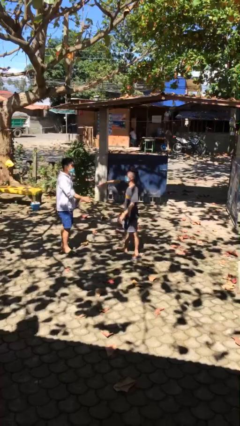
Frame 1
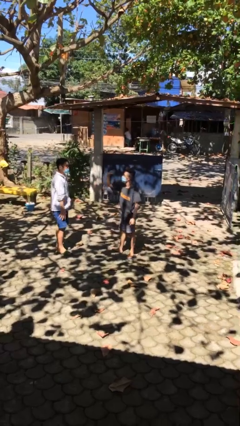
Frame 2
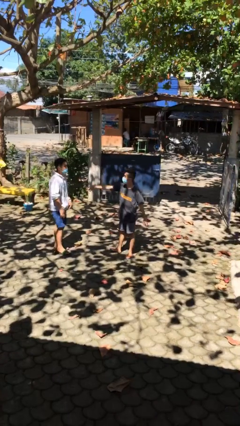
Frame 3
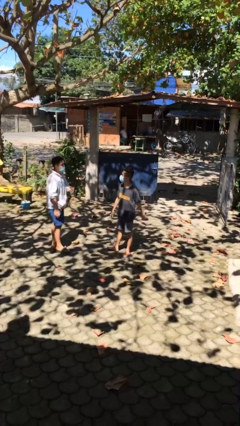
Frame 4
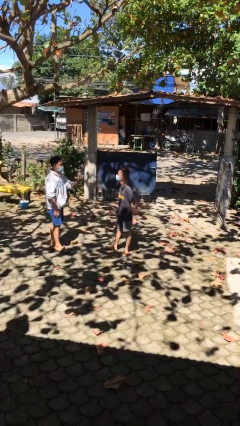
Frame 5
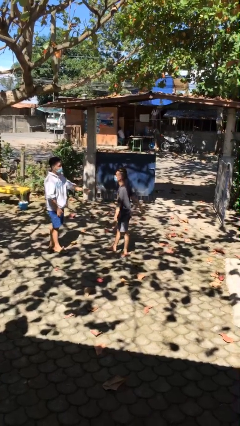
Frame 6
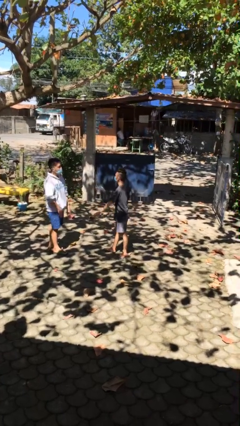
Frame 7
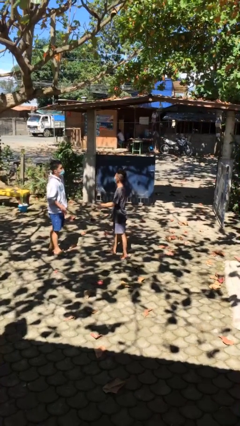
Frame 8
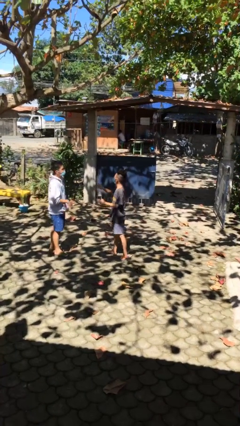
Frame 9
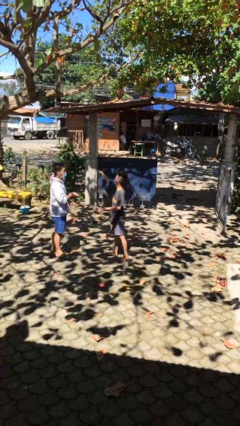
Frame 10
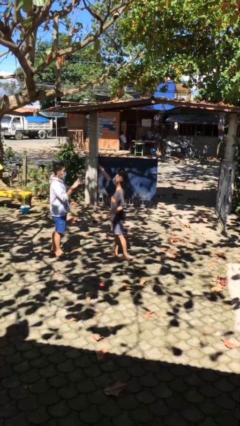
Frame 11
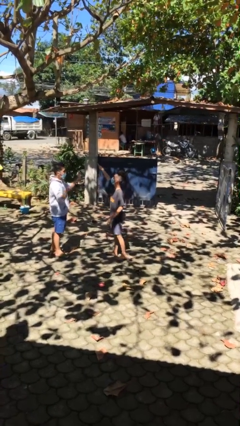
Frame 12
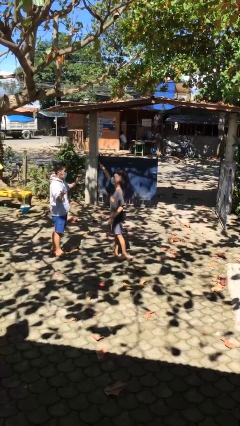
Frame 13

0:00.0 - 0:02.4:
person talks to person

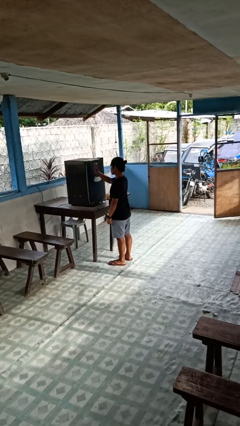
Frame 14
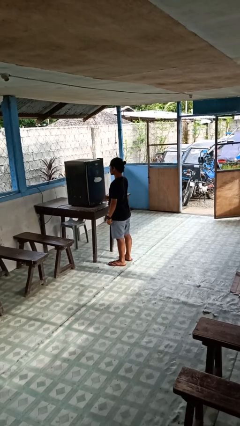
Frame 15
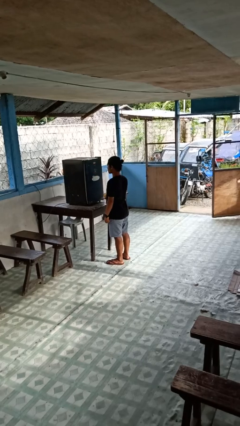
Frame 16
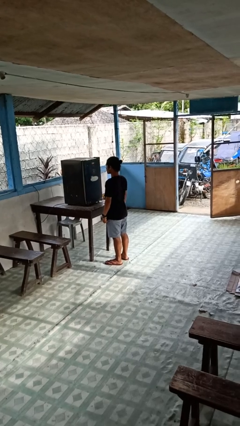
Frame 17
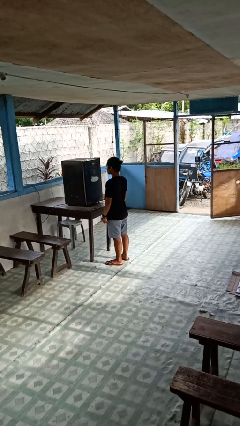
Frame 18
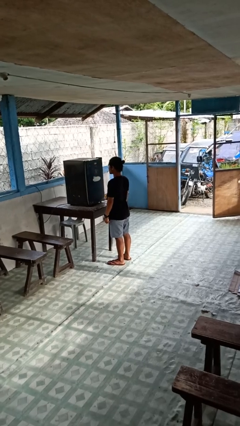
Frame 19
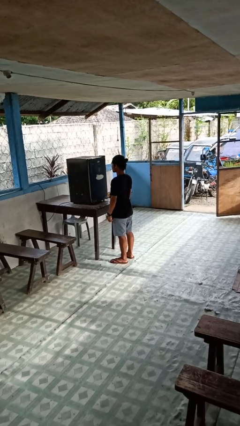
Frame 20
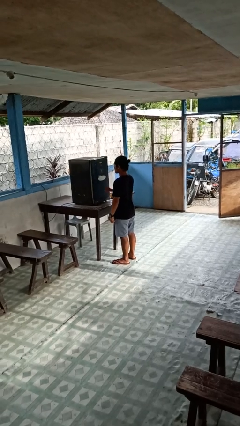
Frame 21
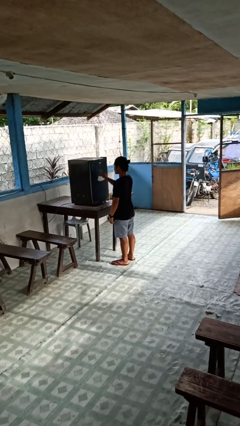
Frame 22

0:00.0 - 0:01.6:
person closes refrigerator

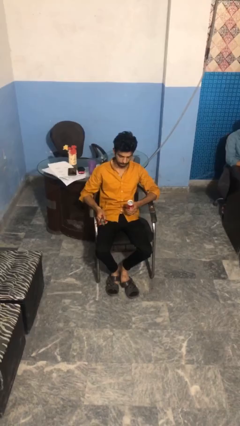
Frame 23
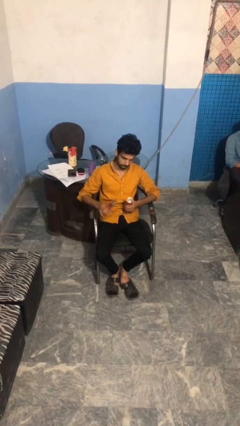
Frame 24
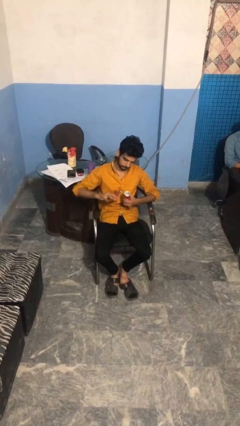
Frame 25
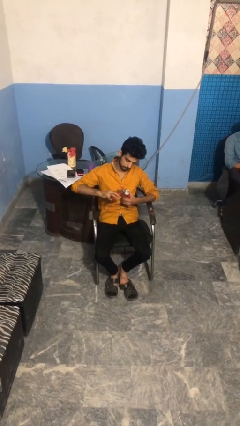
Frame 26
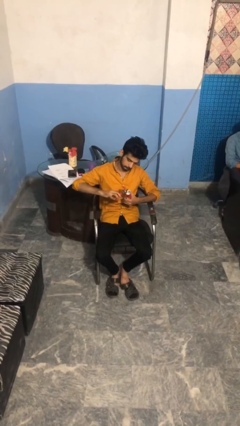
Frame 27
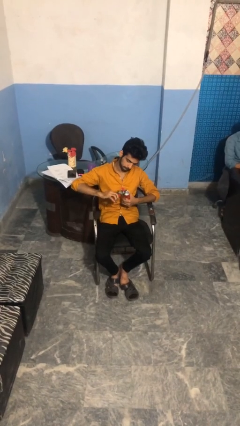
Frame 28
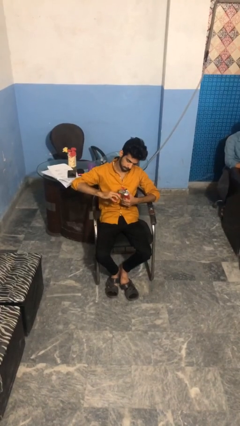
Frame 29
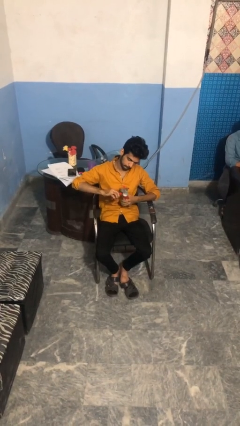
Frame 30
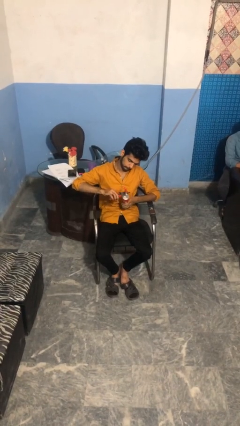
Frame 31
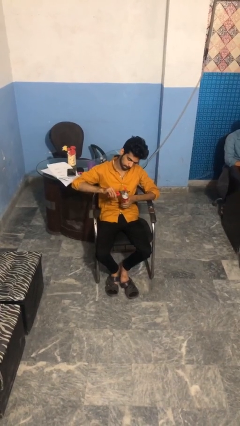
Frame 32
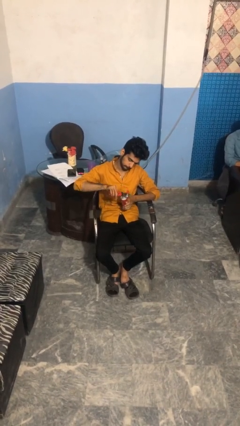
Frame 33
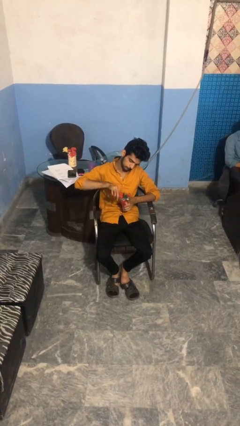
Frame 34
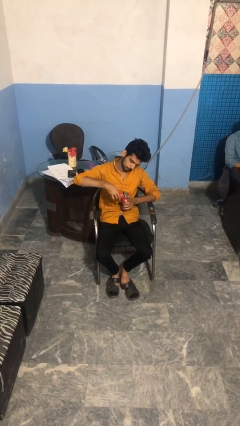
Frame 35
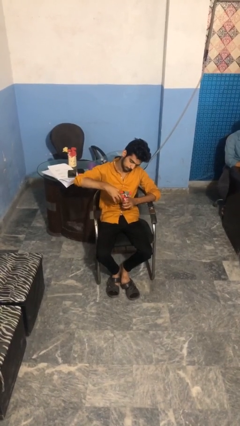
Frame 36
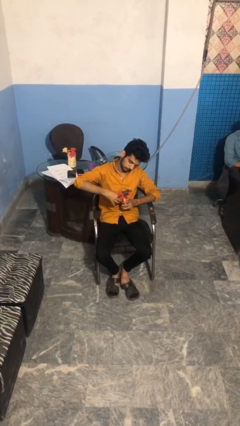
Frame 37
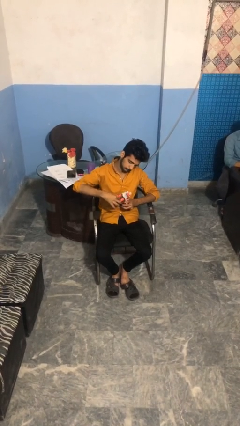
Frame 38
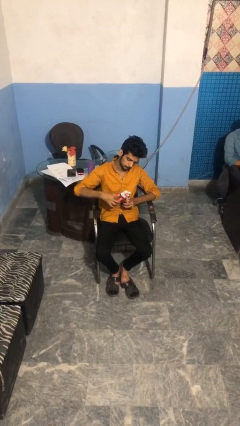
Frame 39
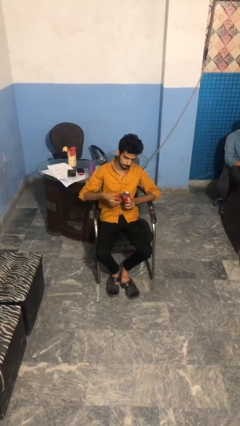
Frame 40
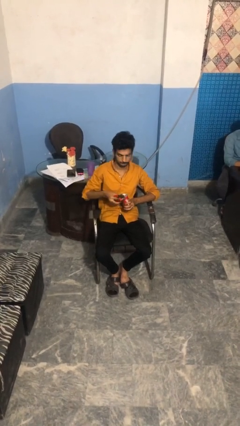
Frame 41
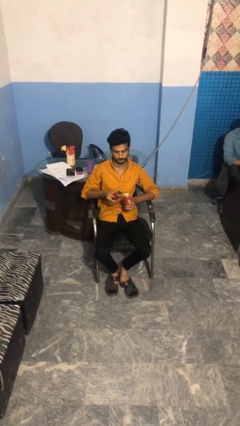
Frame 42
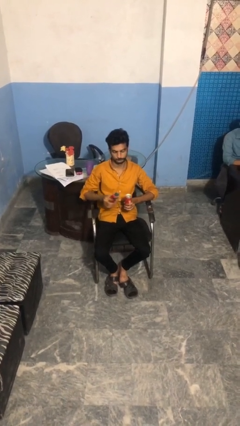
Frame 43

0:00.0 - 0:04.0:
person opens can with can opener

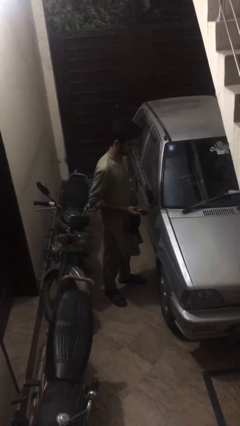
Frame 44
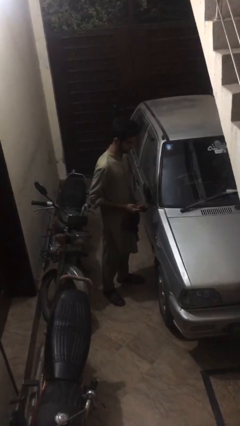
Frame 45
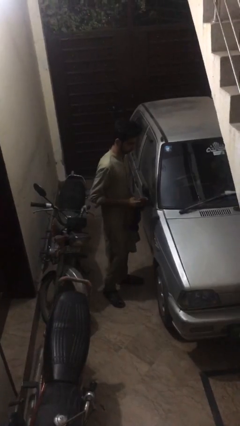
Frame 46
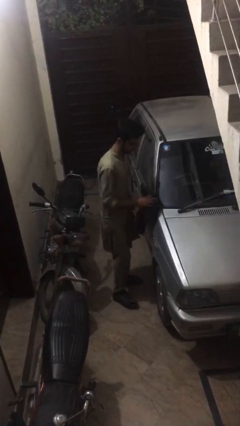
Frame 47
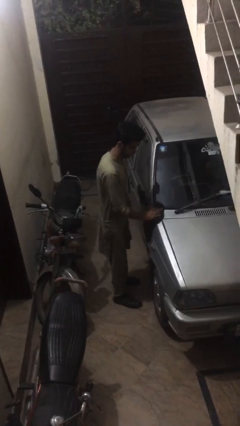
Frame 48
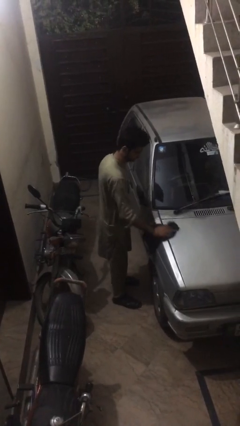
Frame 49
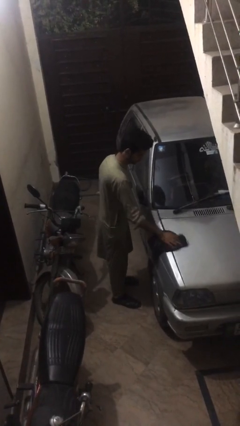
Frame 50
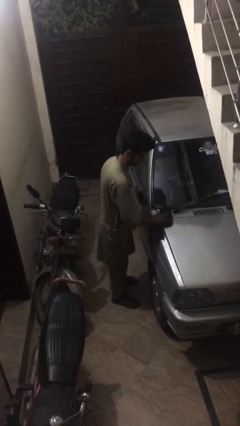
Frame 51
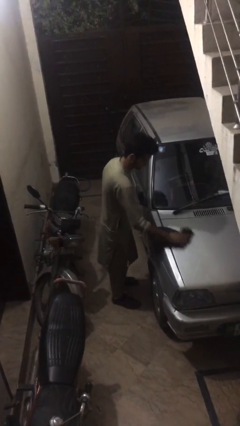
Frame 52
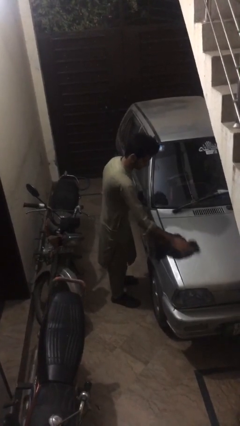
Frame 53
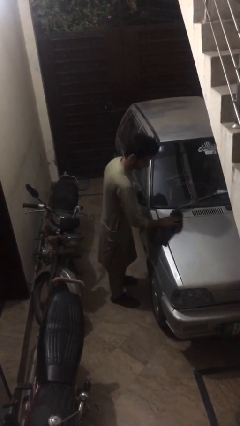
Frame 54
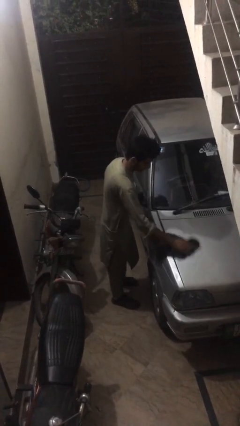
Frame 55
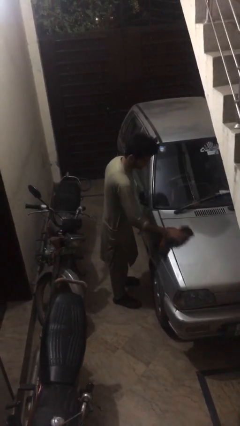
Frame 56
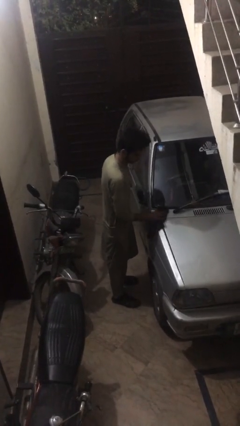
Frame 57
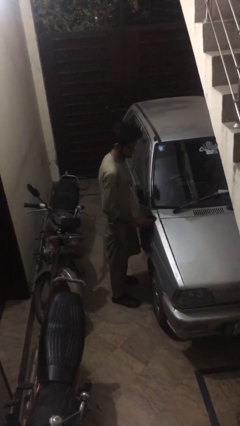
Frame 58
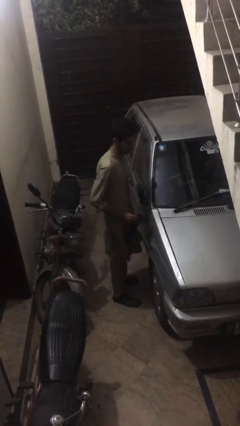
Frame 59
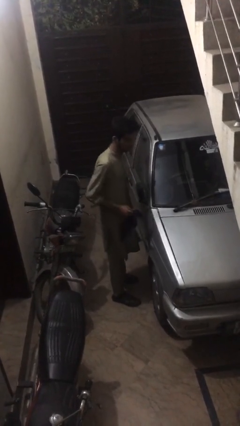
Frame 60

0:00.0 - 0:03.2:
person polishes car with rag

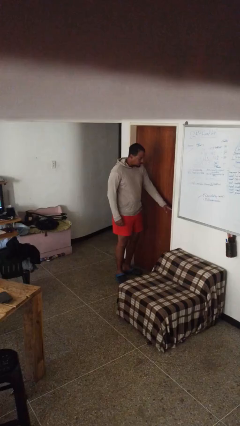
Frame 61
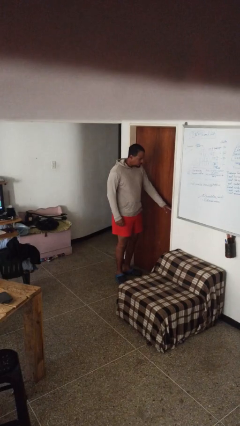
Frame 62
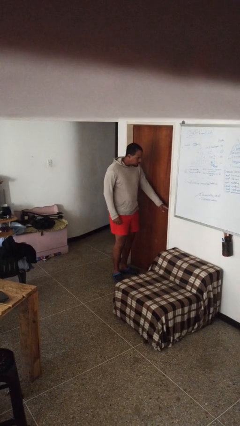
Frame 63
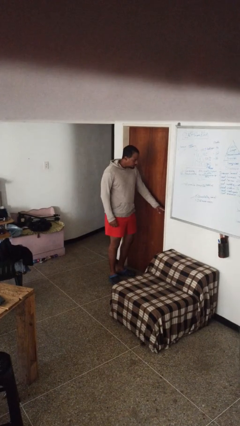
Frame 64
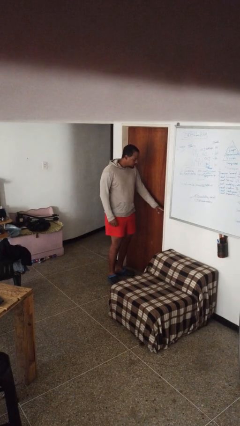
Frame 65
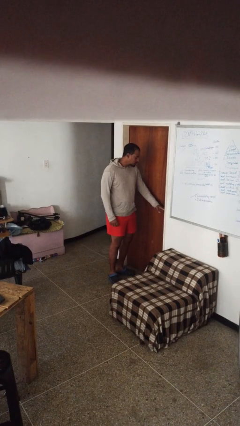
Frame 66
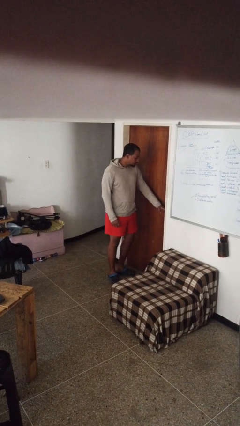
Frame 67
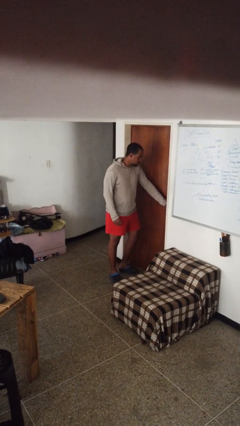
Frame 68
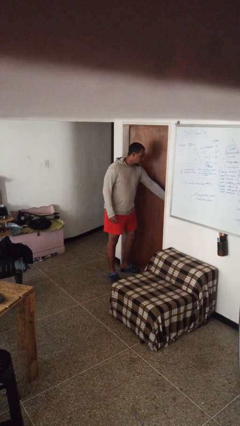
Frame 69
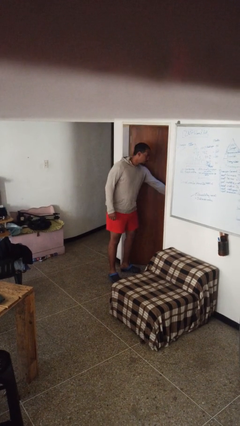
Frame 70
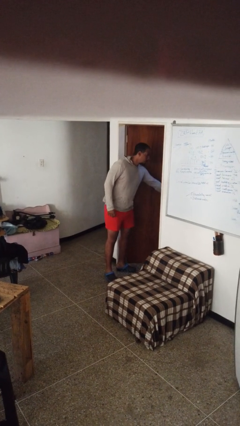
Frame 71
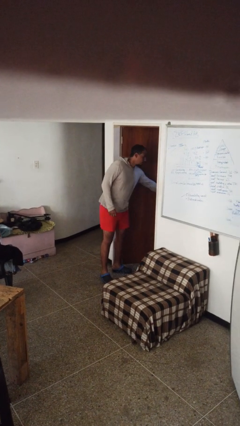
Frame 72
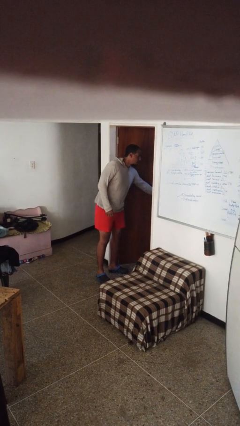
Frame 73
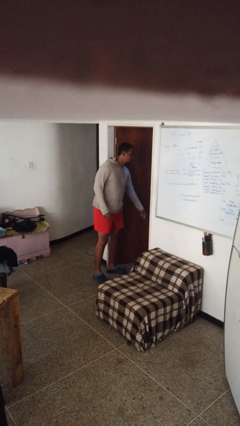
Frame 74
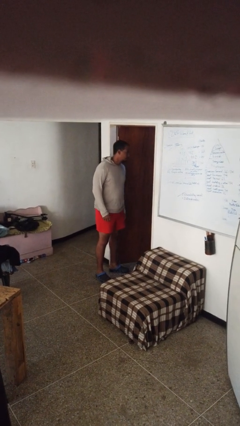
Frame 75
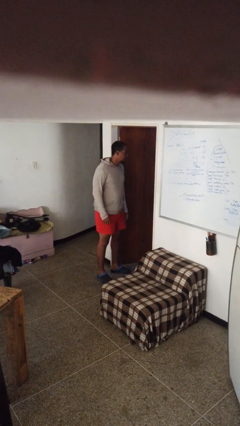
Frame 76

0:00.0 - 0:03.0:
person opens facility door

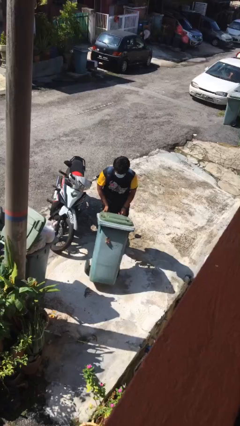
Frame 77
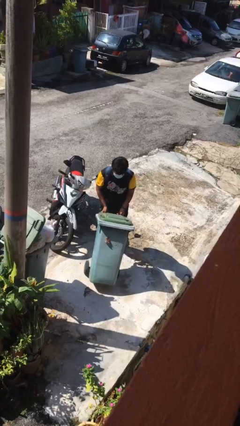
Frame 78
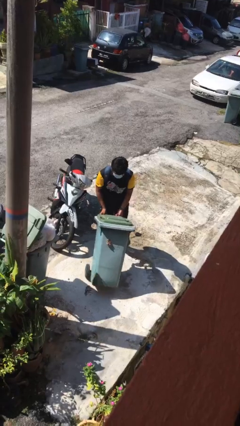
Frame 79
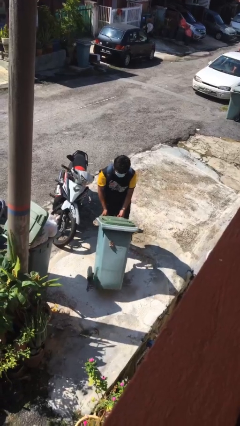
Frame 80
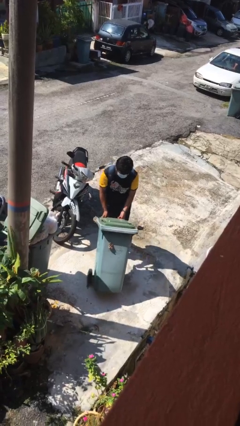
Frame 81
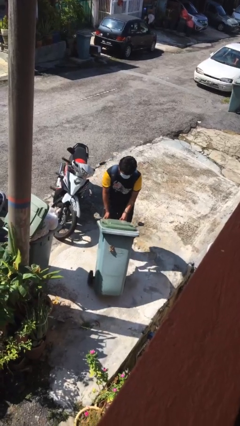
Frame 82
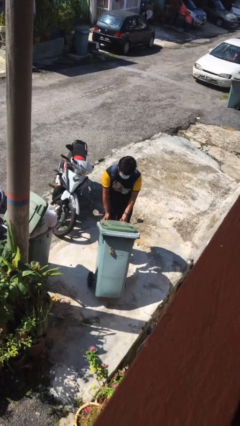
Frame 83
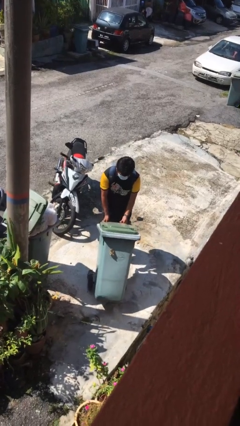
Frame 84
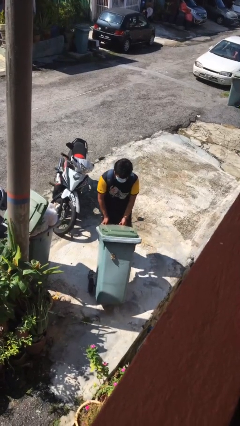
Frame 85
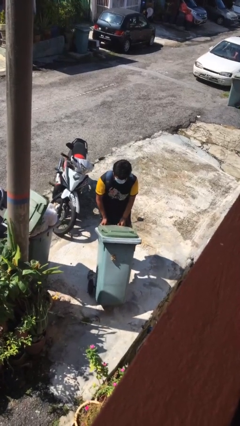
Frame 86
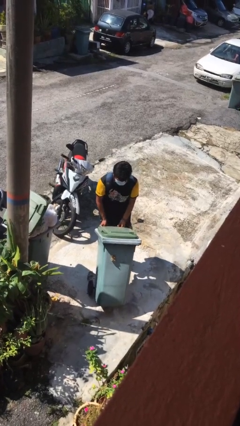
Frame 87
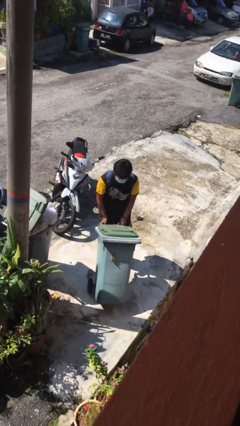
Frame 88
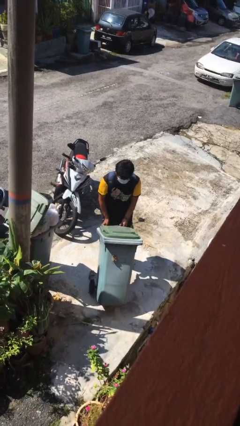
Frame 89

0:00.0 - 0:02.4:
person pushes wheeled trashcan

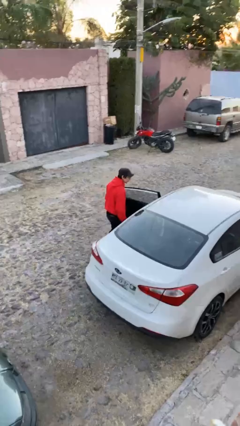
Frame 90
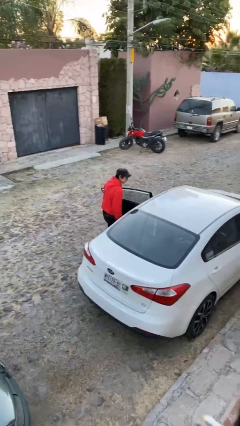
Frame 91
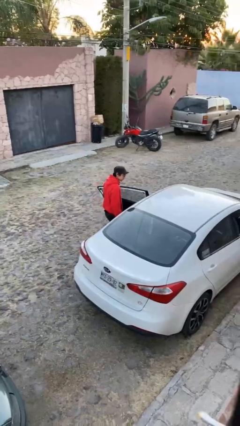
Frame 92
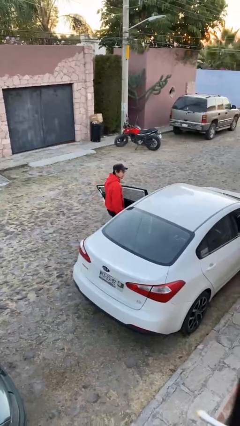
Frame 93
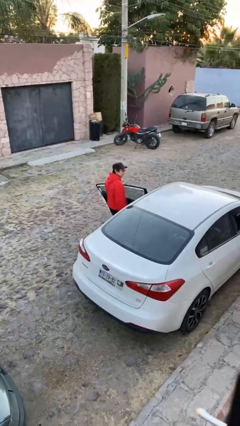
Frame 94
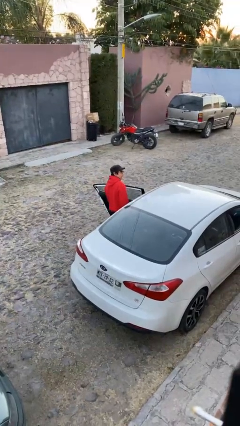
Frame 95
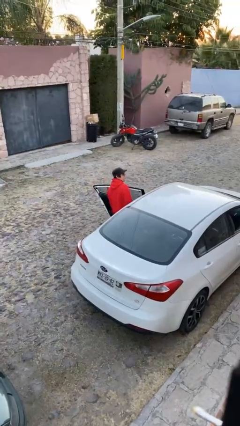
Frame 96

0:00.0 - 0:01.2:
person enters car
